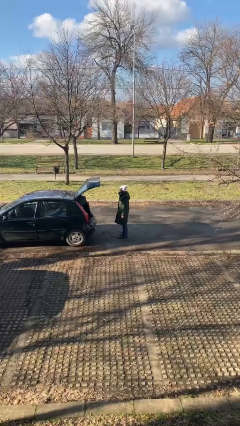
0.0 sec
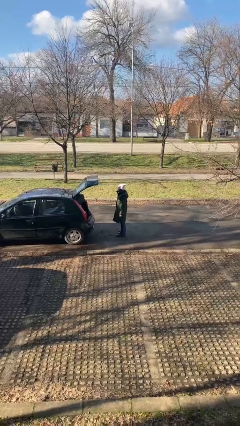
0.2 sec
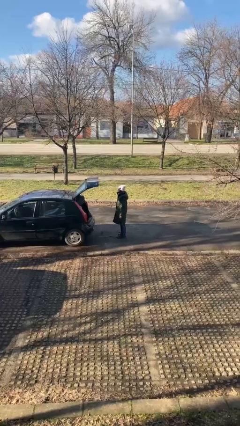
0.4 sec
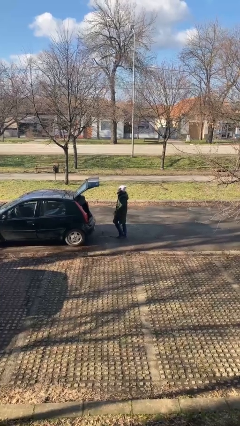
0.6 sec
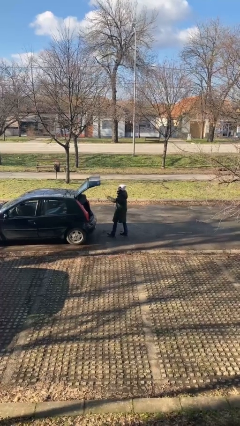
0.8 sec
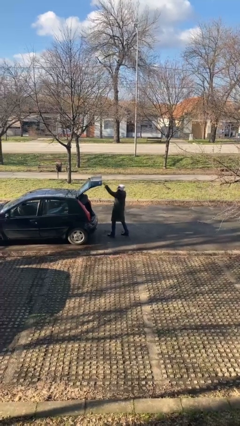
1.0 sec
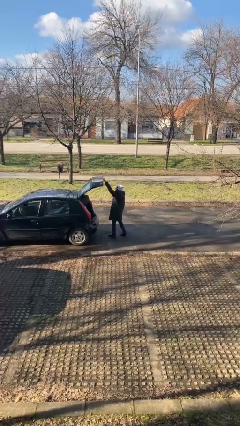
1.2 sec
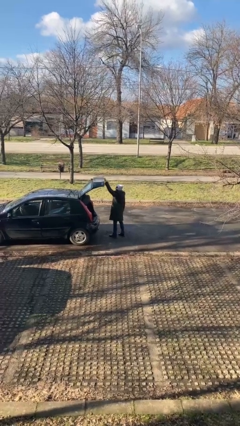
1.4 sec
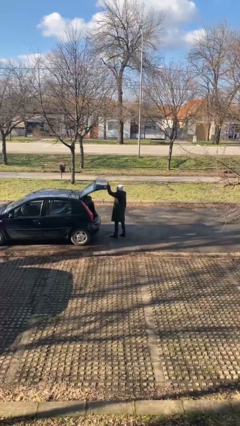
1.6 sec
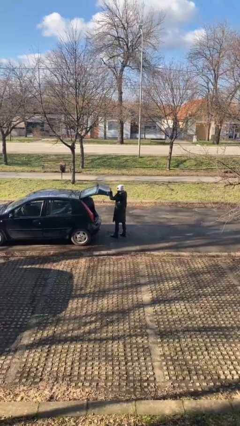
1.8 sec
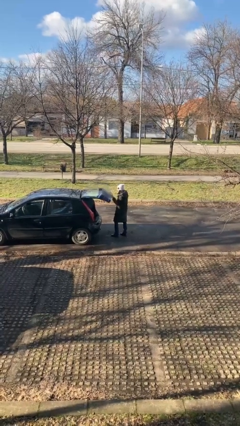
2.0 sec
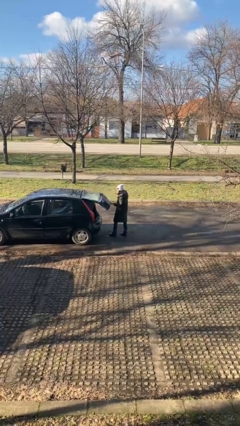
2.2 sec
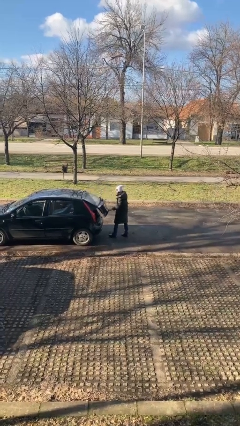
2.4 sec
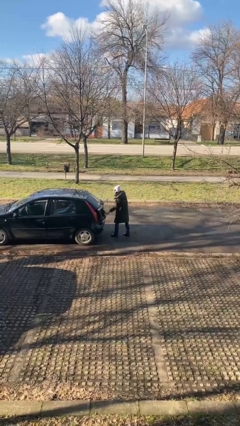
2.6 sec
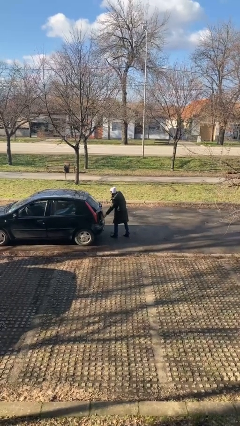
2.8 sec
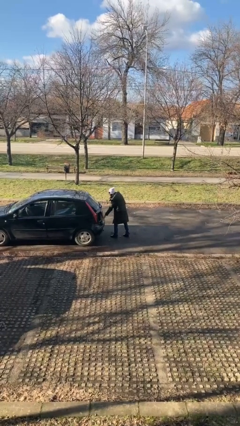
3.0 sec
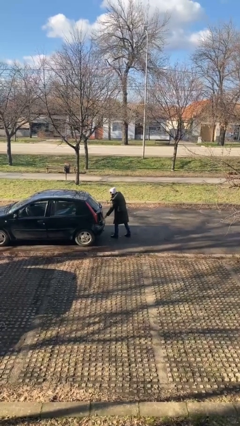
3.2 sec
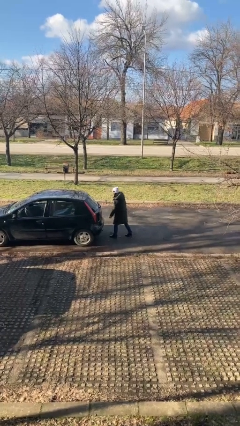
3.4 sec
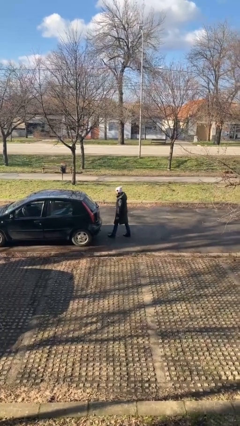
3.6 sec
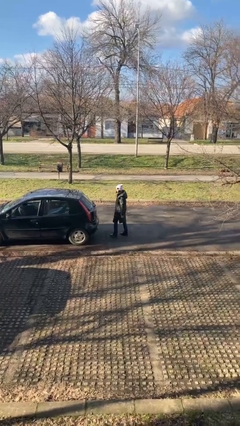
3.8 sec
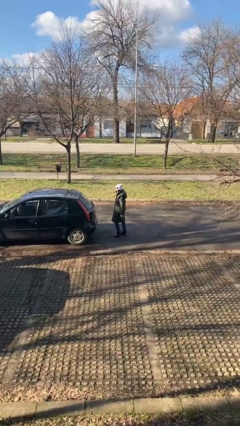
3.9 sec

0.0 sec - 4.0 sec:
person closes car trunk

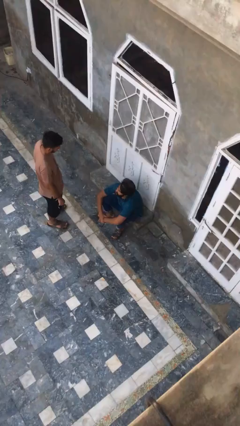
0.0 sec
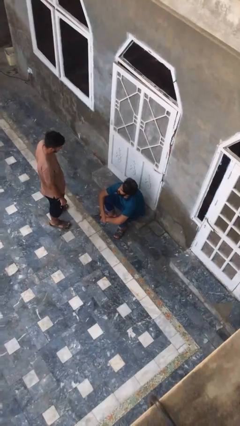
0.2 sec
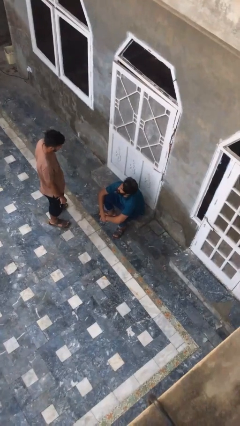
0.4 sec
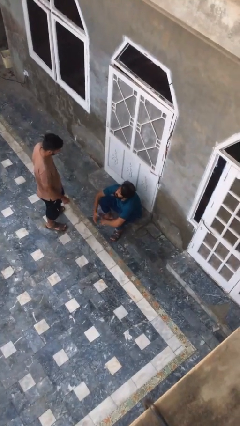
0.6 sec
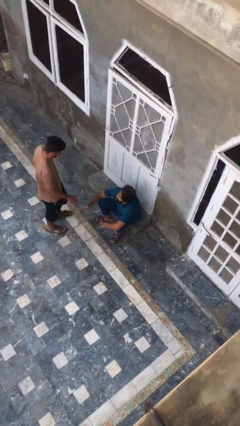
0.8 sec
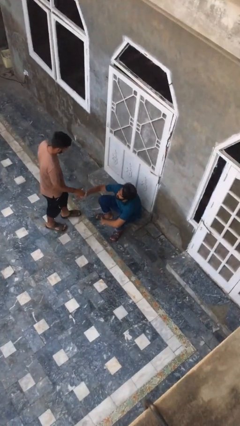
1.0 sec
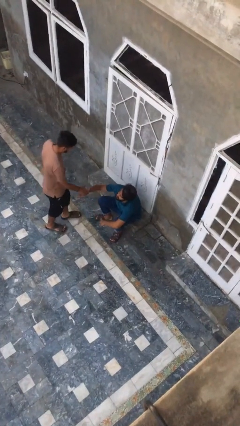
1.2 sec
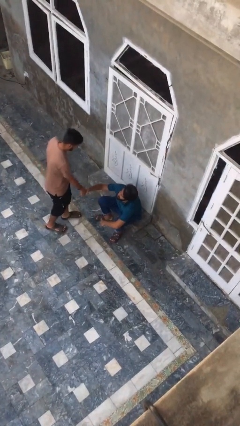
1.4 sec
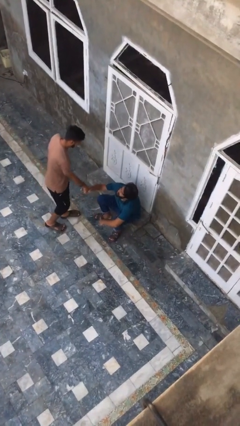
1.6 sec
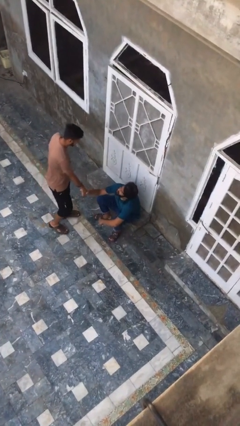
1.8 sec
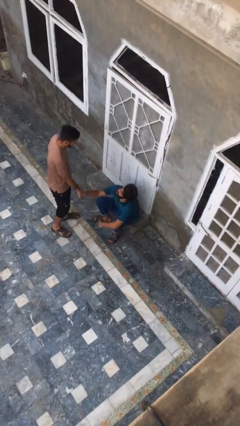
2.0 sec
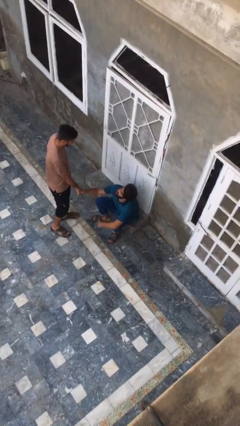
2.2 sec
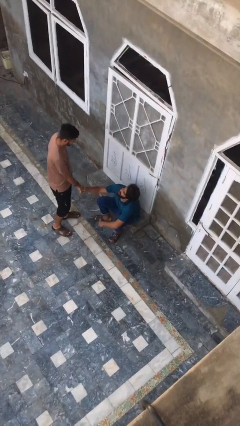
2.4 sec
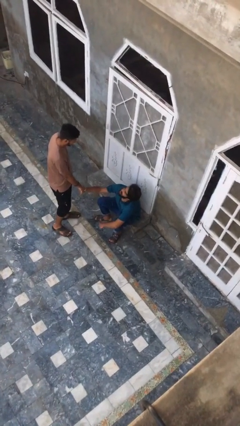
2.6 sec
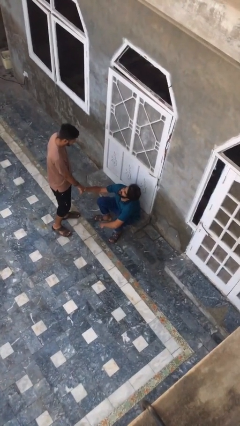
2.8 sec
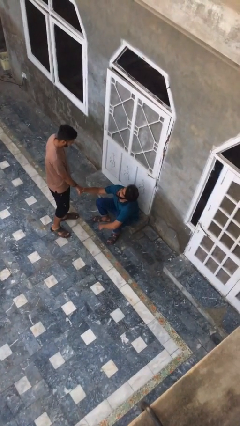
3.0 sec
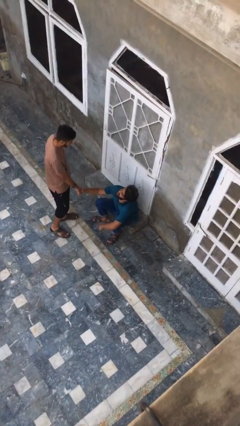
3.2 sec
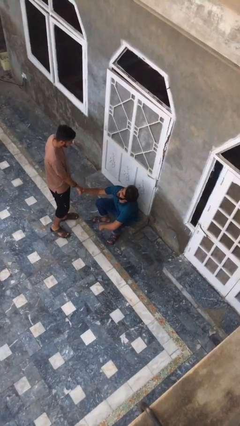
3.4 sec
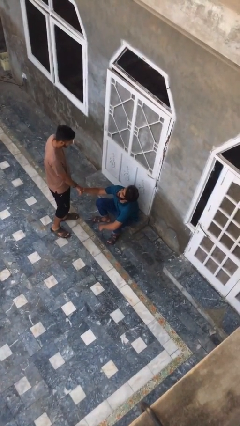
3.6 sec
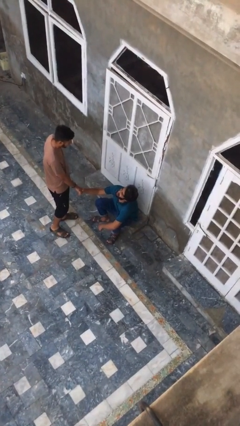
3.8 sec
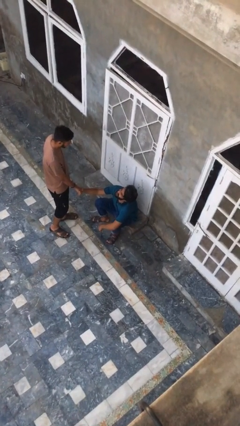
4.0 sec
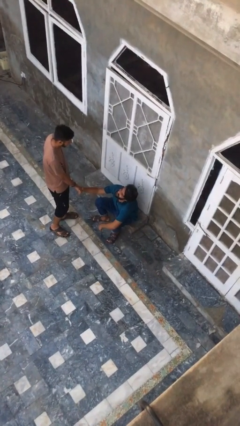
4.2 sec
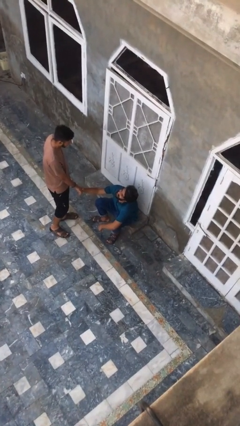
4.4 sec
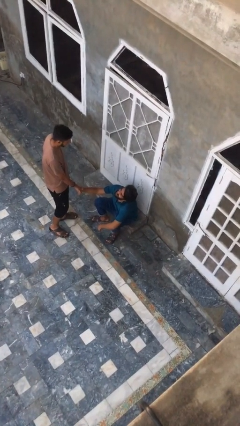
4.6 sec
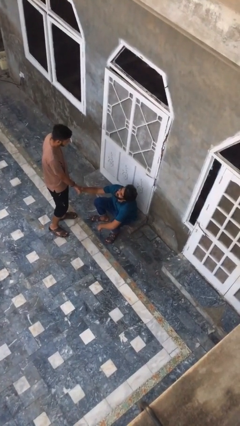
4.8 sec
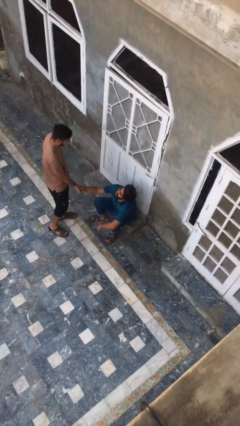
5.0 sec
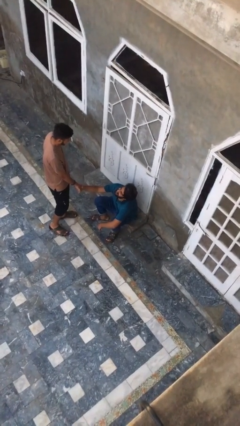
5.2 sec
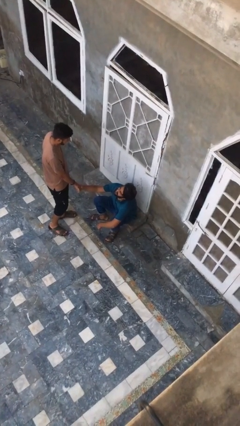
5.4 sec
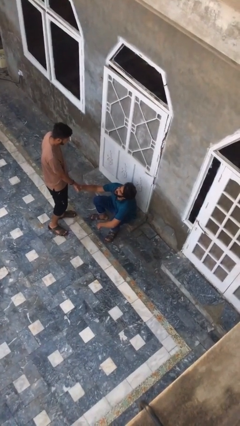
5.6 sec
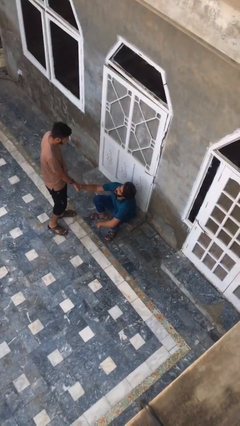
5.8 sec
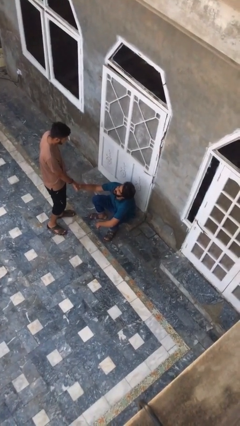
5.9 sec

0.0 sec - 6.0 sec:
person shakes hand

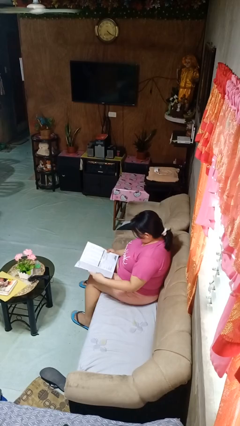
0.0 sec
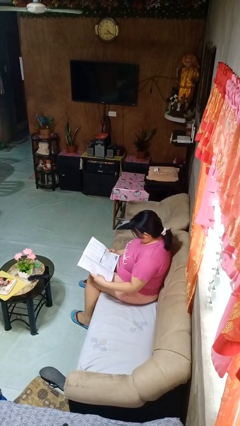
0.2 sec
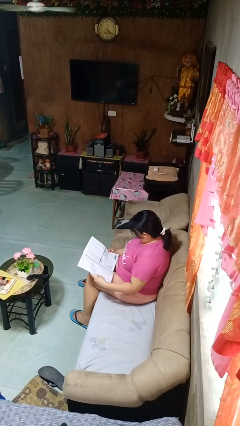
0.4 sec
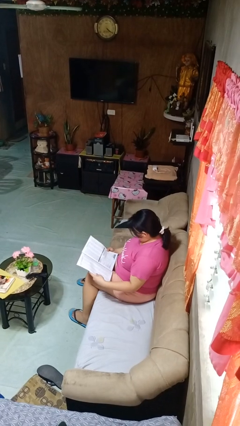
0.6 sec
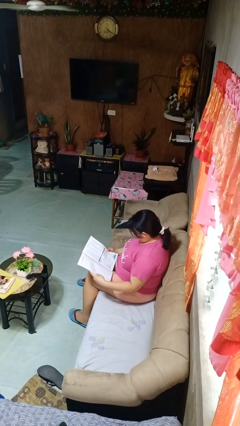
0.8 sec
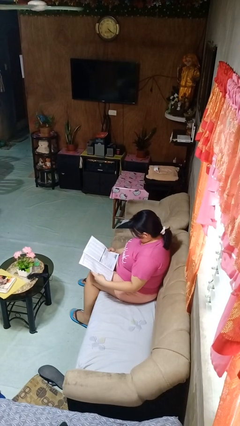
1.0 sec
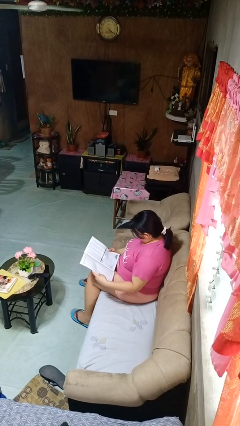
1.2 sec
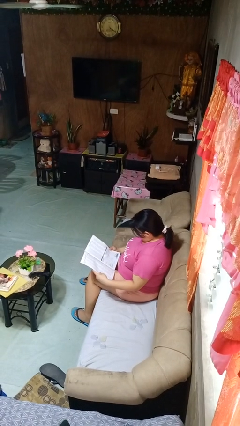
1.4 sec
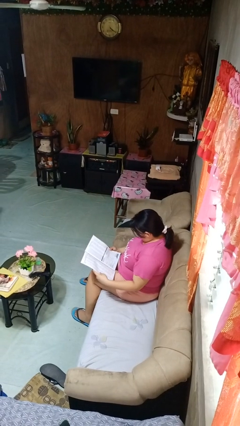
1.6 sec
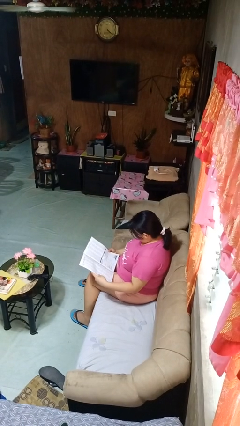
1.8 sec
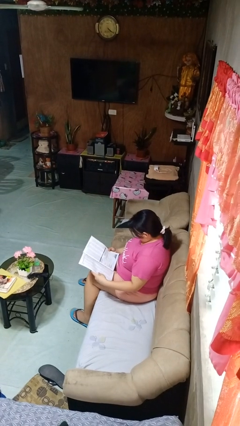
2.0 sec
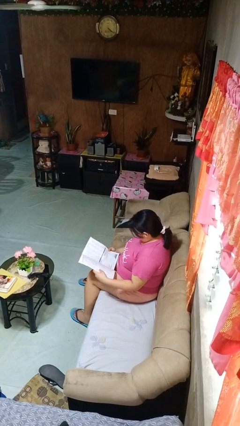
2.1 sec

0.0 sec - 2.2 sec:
person reads magazine

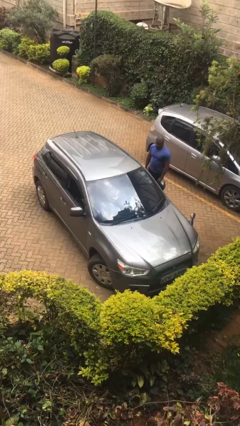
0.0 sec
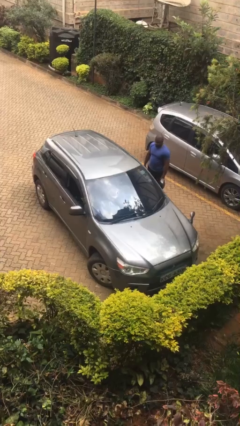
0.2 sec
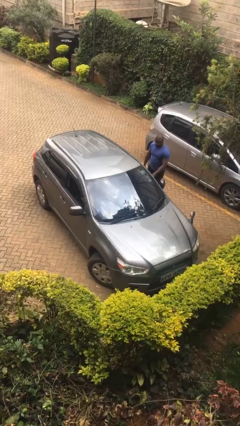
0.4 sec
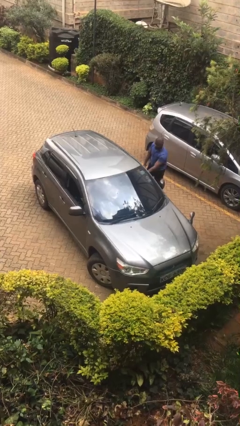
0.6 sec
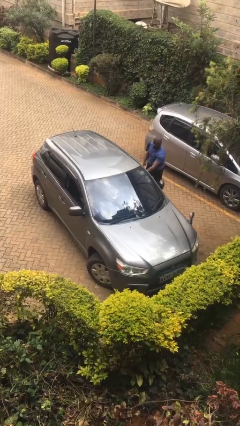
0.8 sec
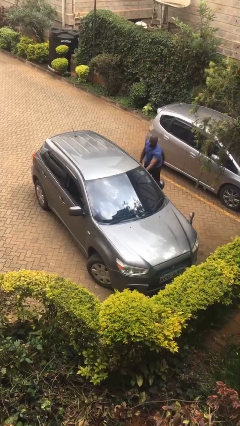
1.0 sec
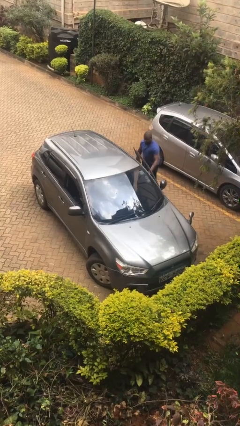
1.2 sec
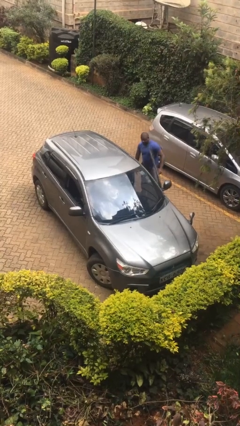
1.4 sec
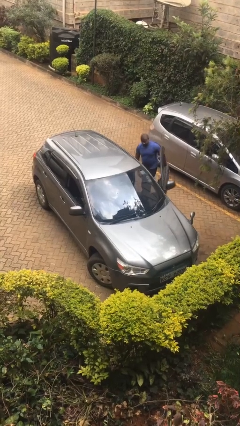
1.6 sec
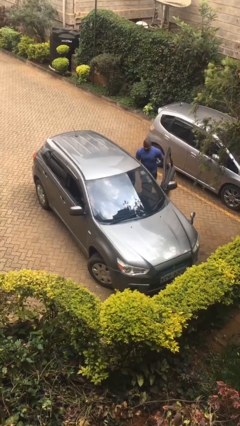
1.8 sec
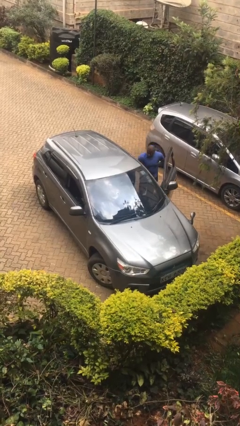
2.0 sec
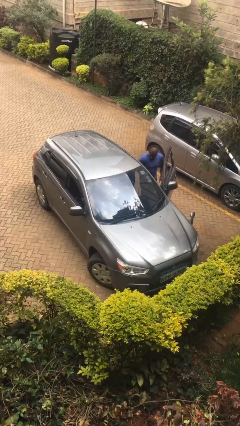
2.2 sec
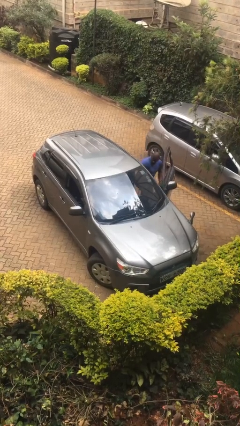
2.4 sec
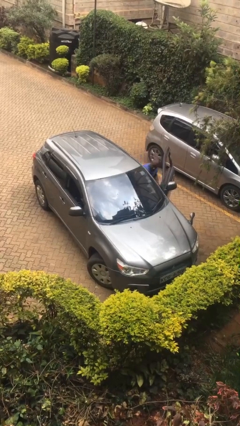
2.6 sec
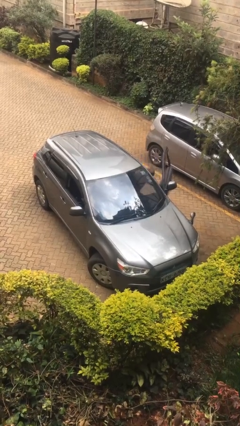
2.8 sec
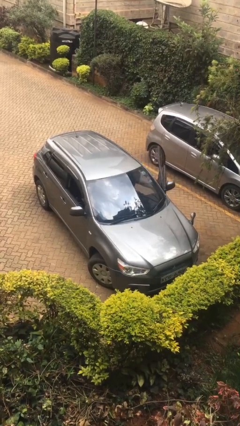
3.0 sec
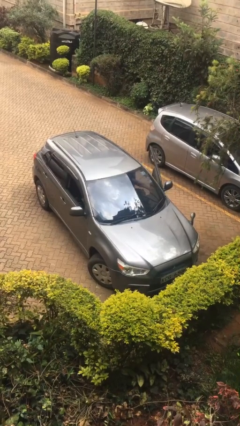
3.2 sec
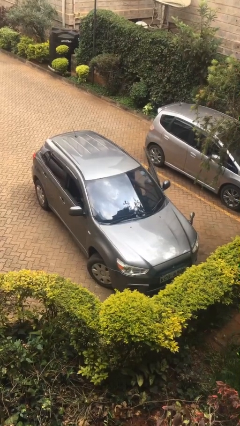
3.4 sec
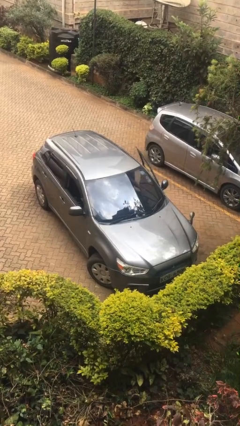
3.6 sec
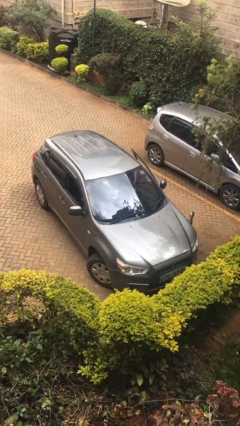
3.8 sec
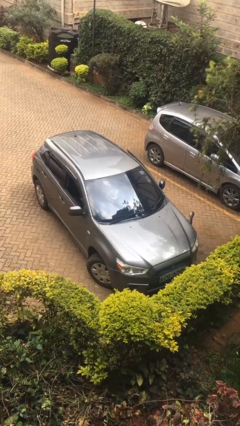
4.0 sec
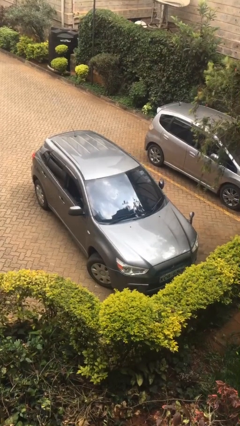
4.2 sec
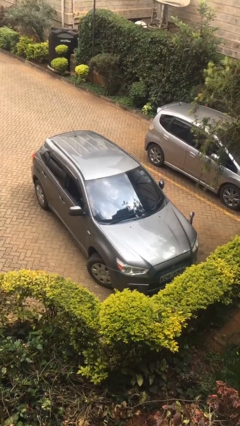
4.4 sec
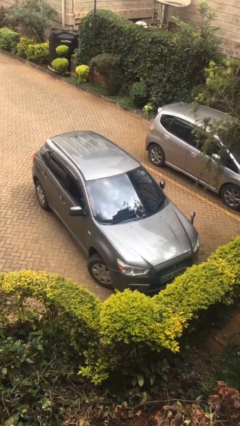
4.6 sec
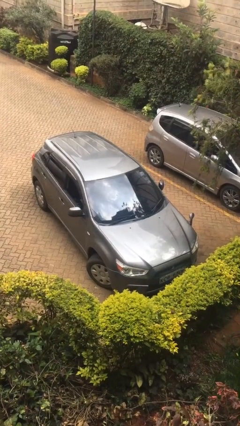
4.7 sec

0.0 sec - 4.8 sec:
car picks up person

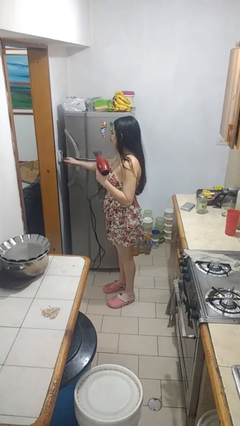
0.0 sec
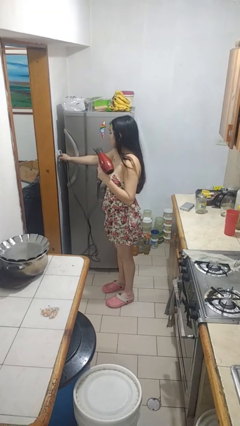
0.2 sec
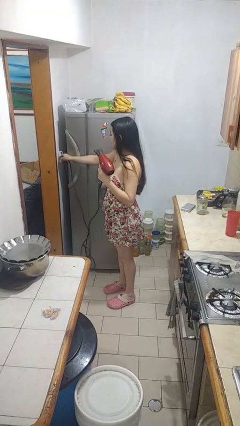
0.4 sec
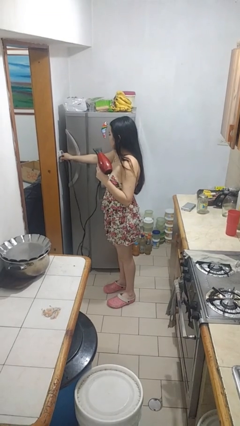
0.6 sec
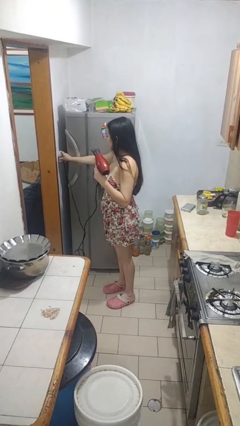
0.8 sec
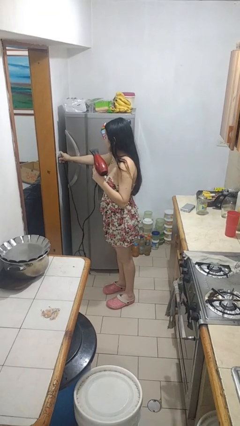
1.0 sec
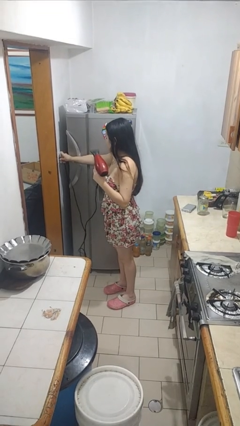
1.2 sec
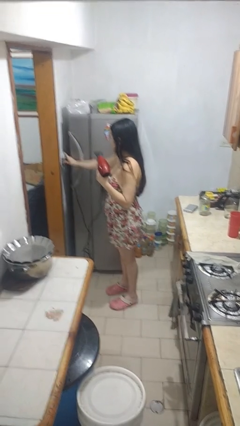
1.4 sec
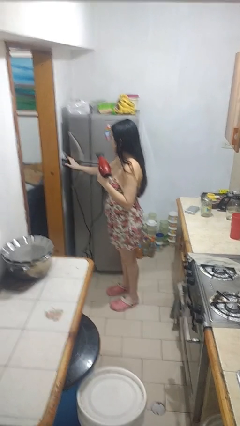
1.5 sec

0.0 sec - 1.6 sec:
person plugs into electrical socket
